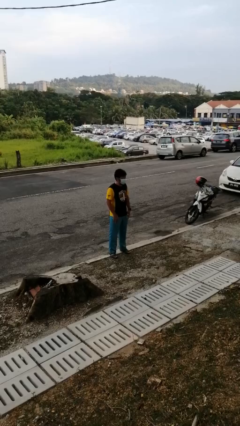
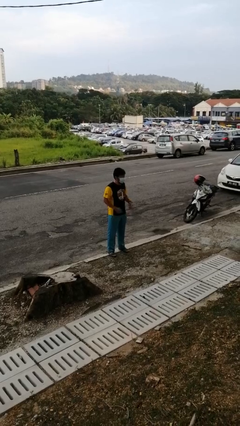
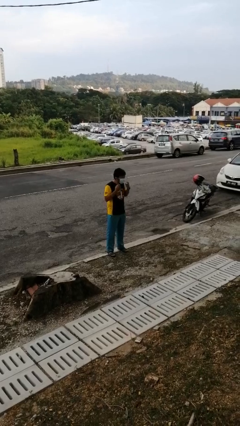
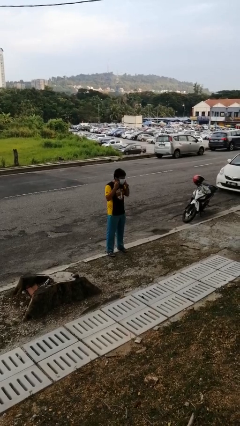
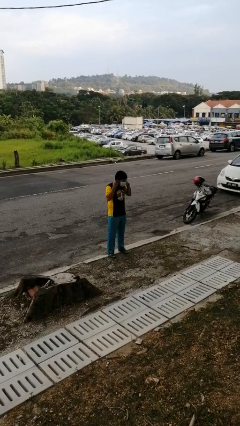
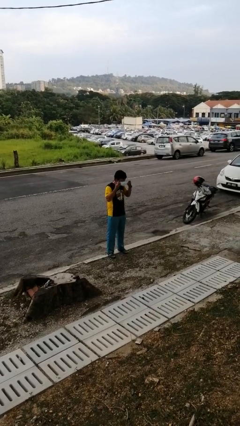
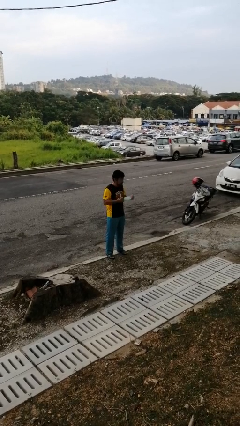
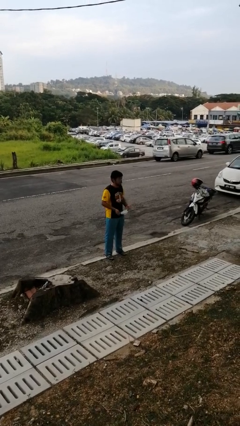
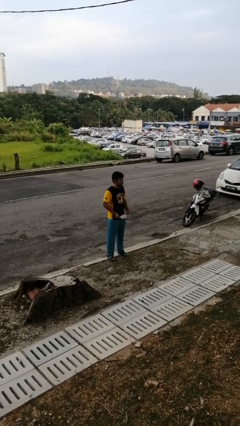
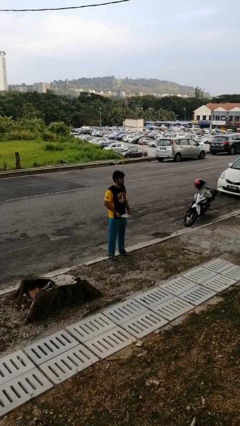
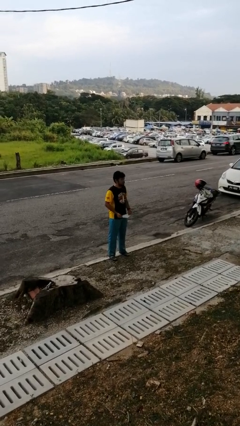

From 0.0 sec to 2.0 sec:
person takes off facemask

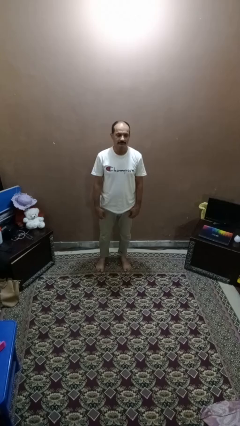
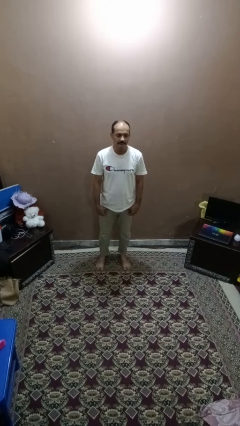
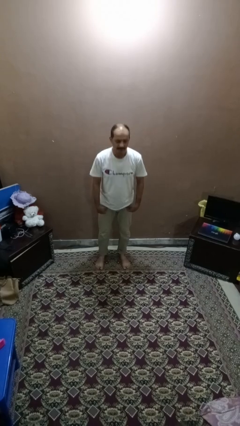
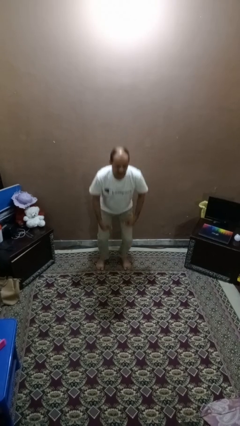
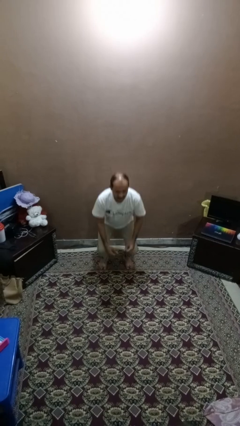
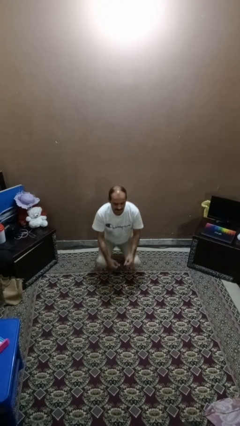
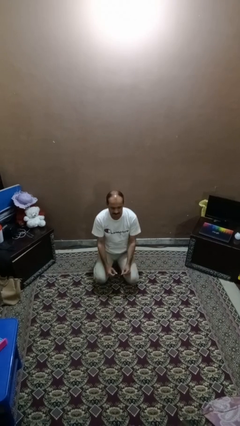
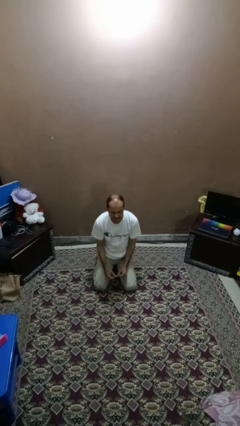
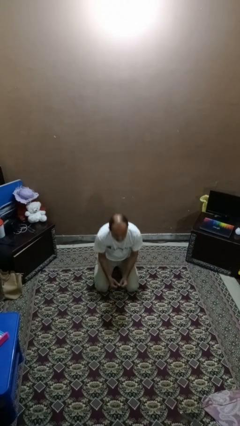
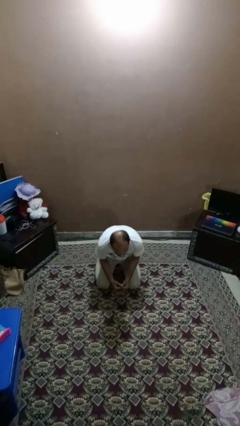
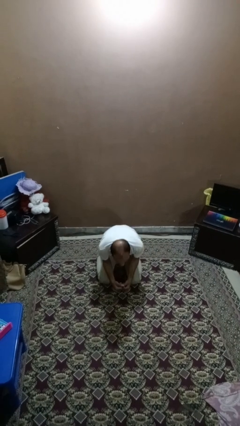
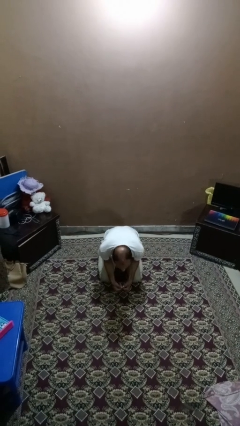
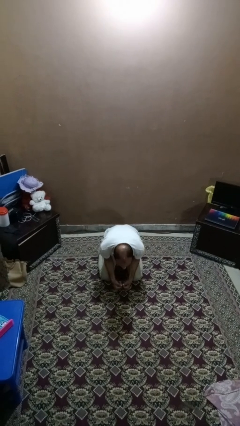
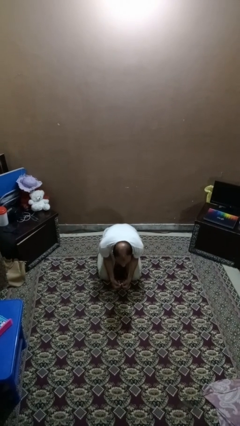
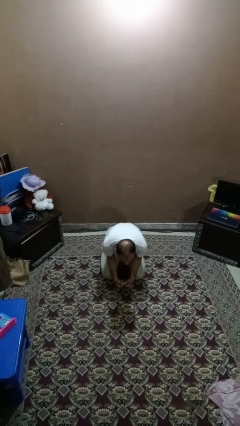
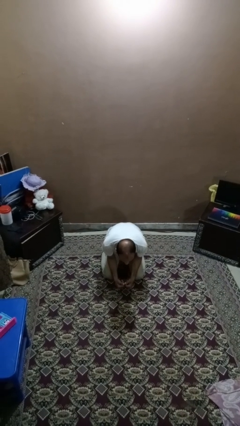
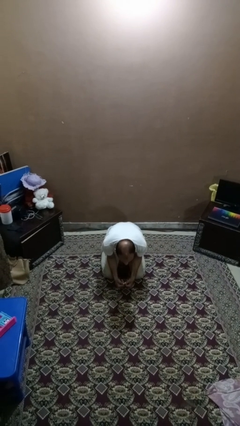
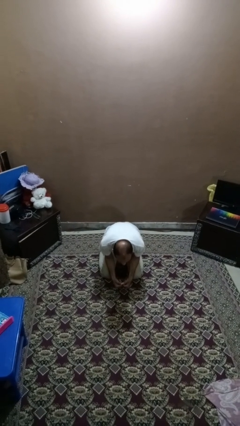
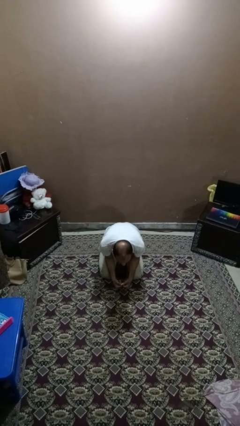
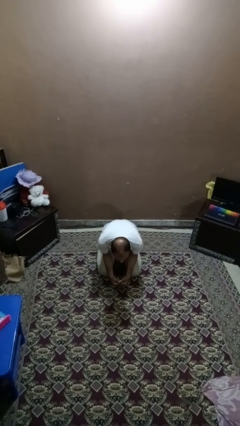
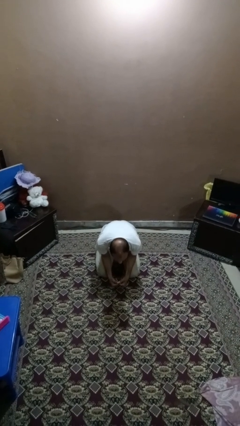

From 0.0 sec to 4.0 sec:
person kneels

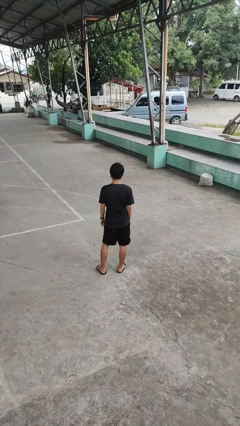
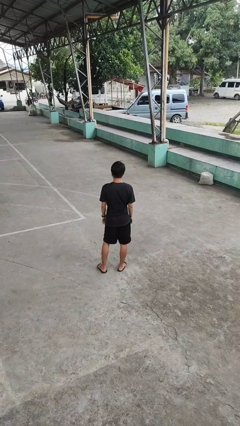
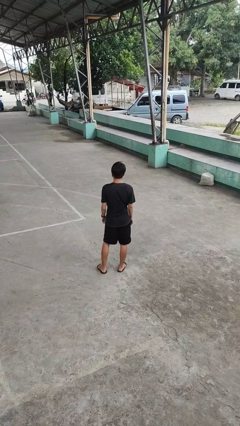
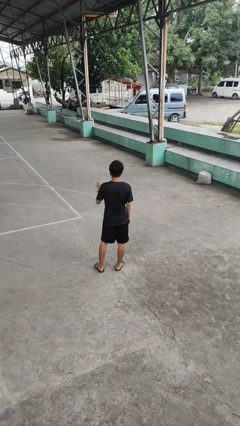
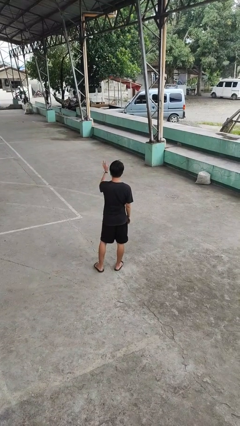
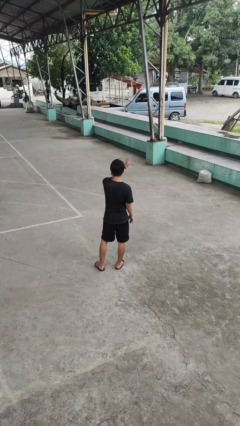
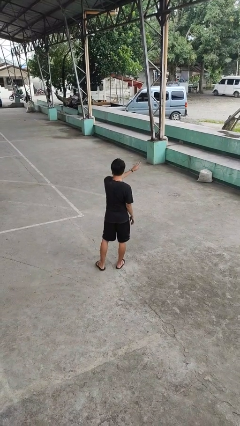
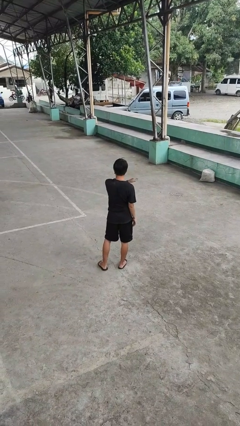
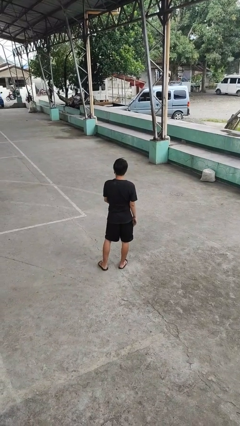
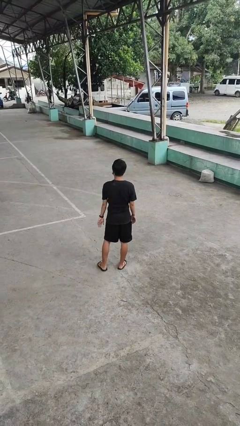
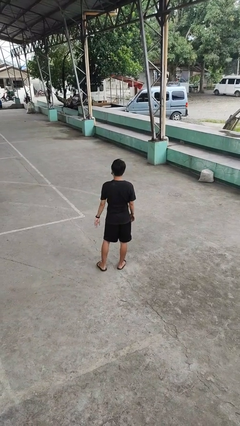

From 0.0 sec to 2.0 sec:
person gestures swipe right

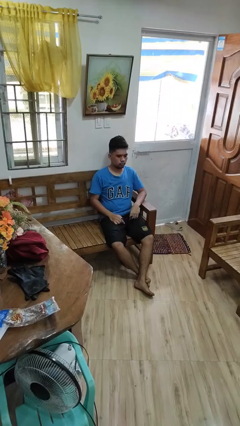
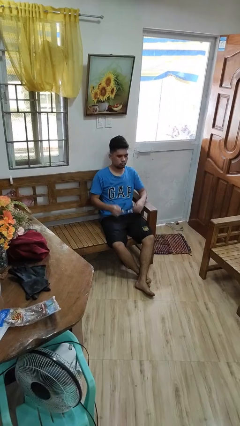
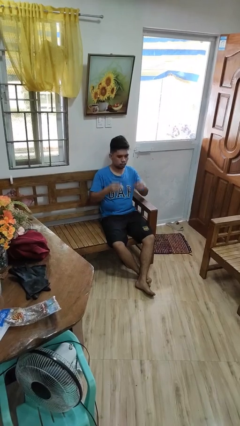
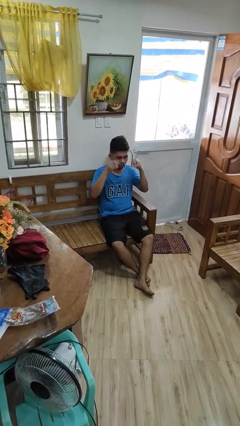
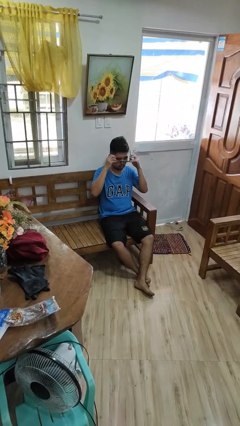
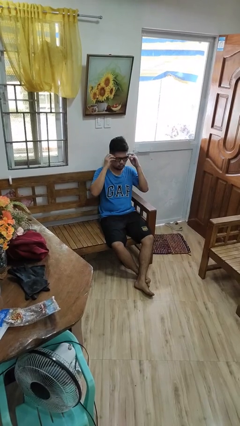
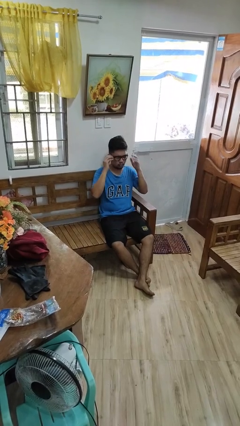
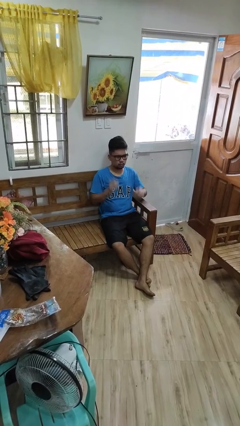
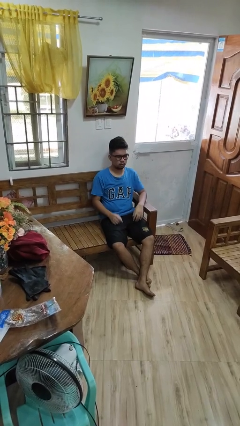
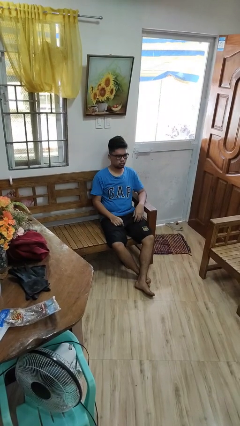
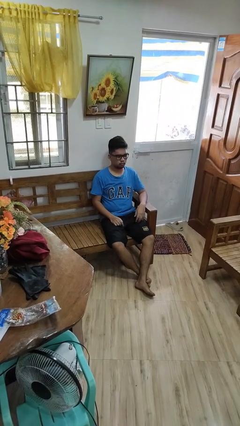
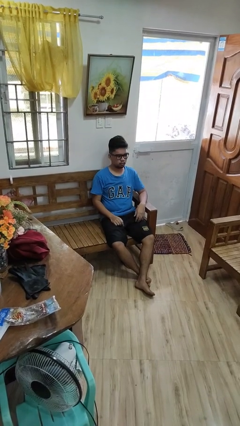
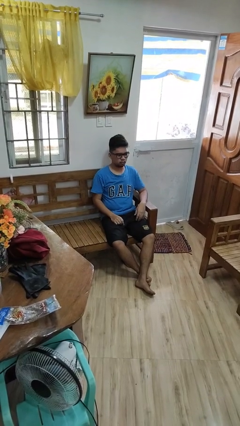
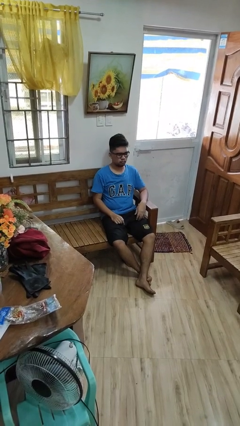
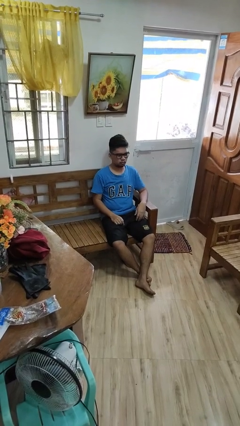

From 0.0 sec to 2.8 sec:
person puts on glasses

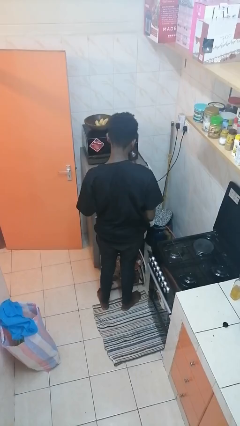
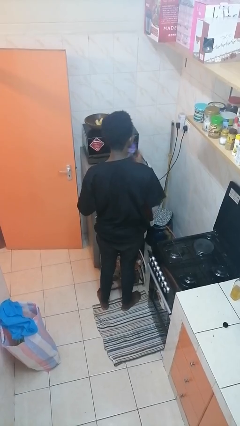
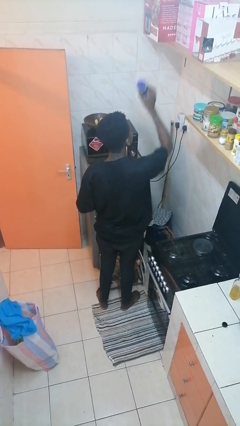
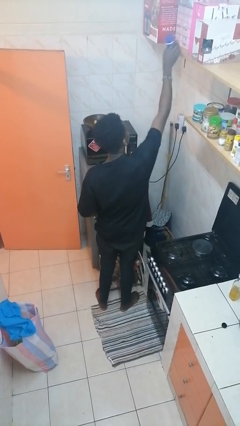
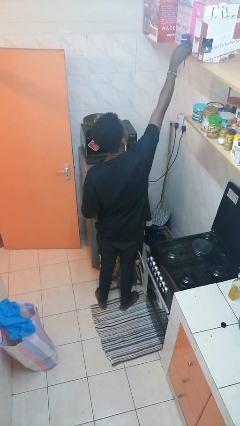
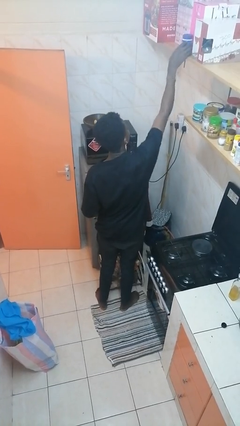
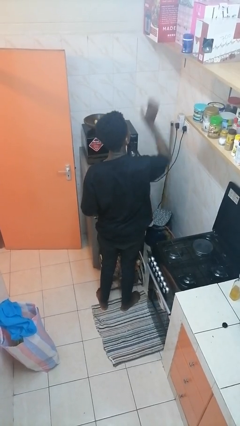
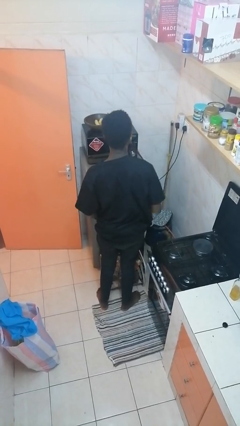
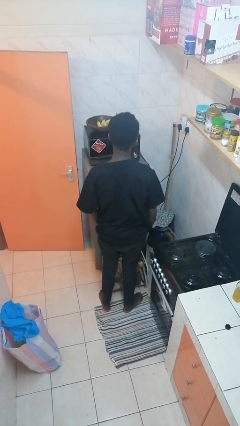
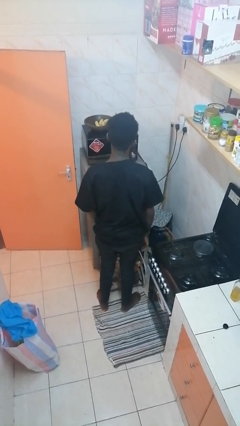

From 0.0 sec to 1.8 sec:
person puts down object on shelf

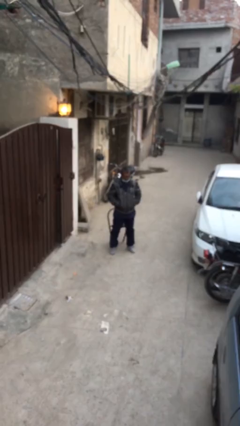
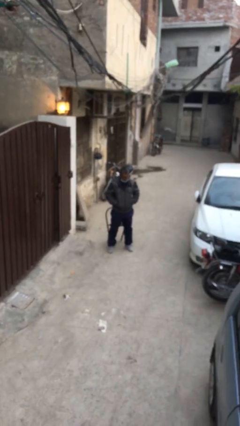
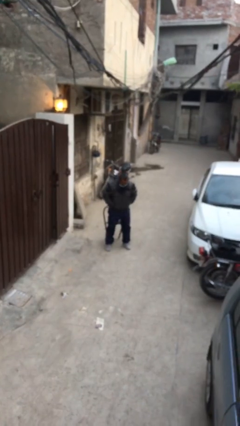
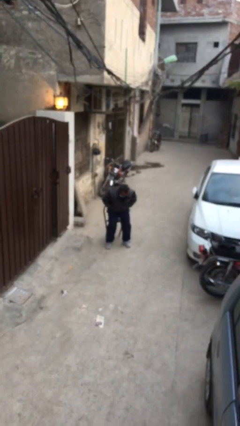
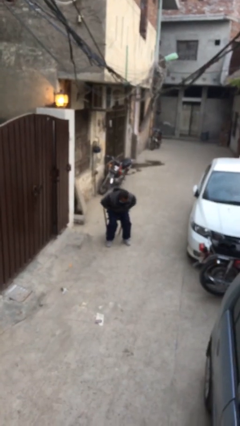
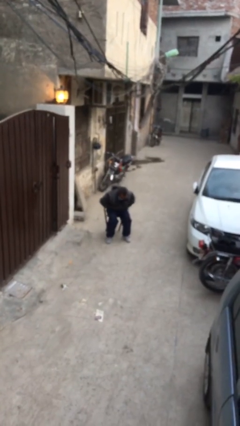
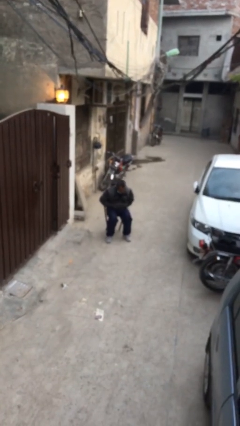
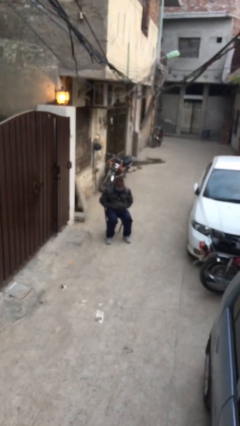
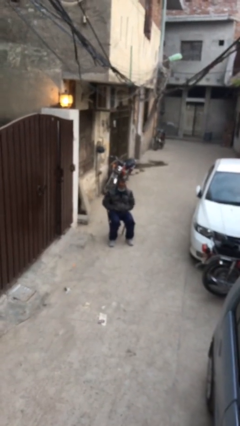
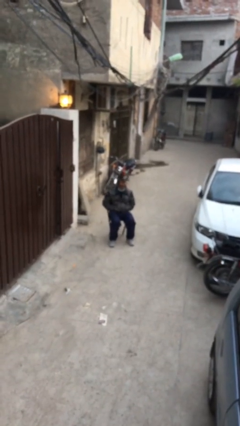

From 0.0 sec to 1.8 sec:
person sits down

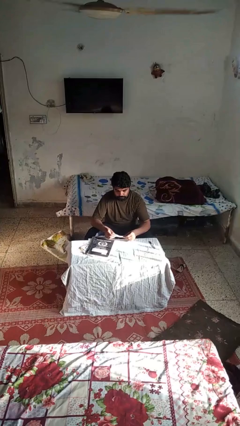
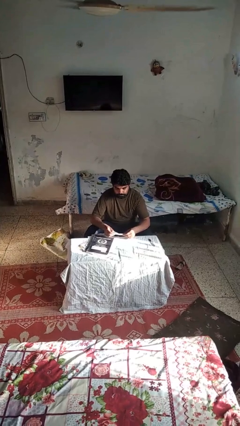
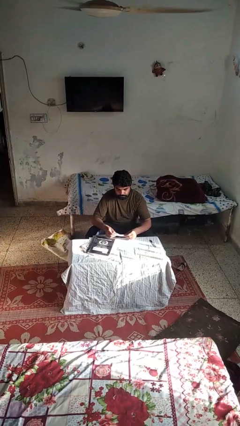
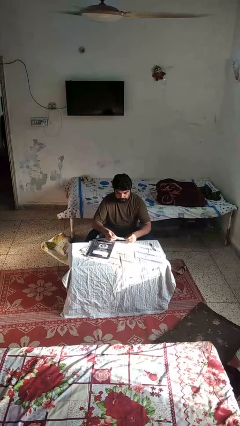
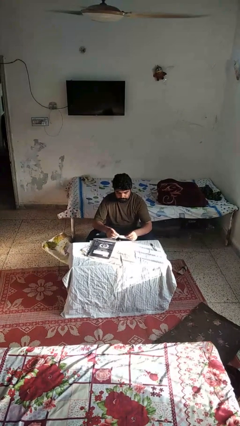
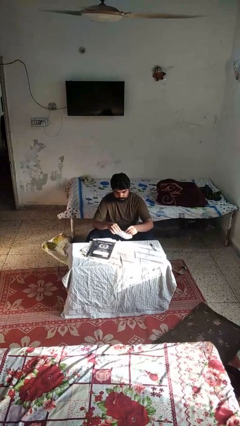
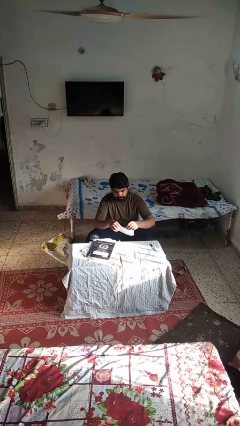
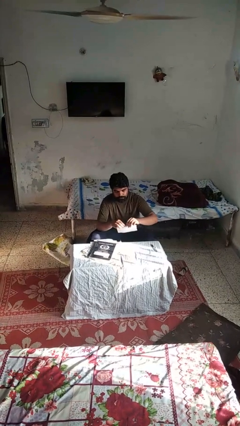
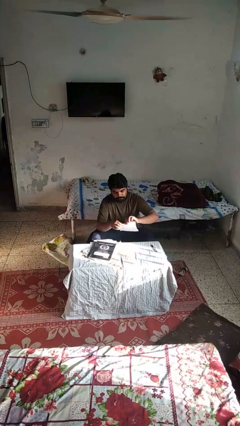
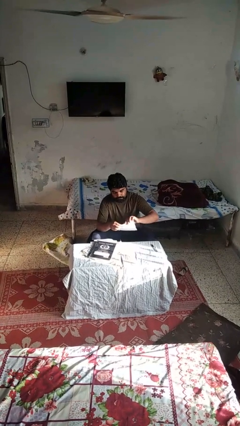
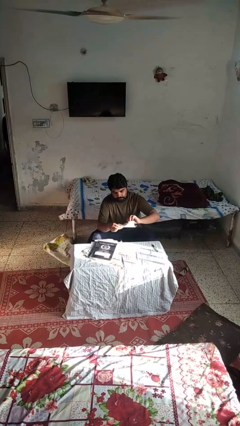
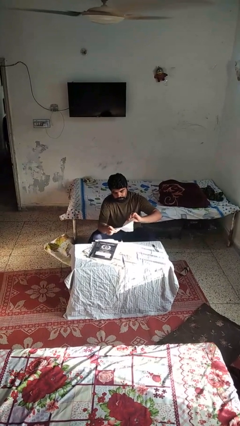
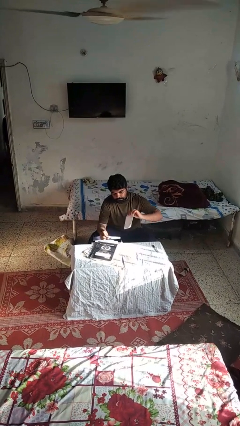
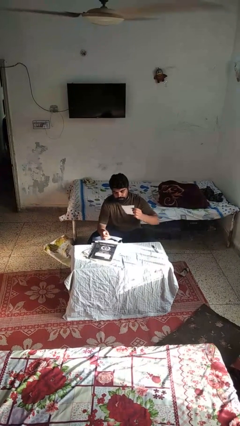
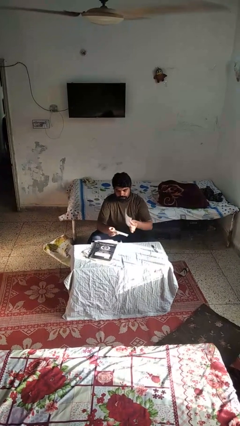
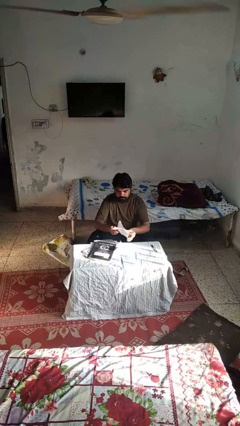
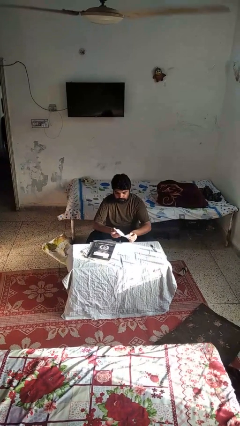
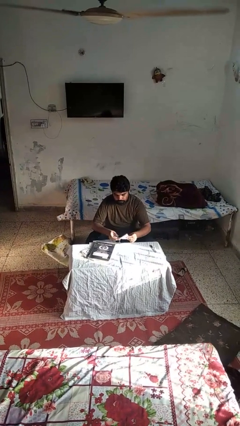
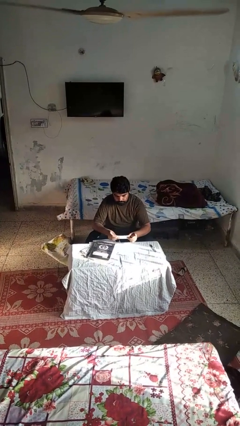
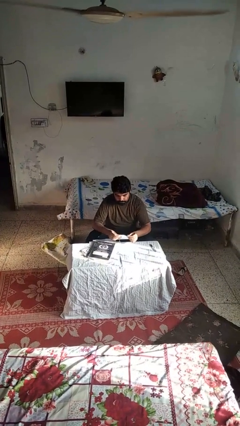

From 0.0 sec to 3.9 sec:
person tears paper
